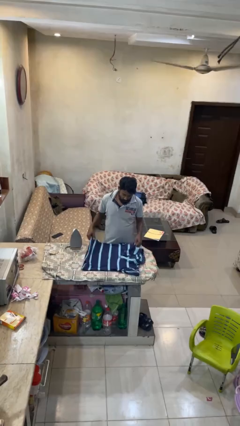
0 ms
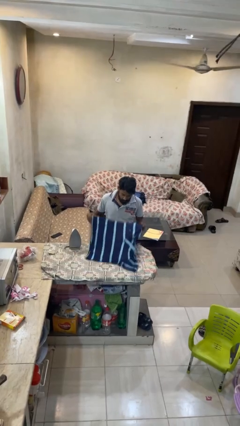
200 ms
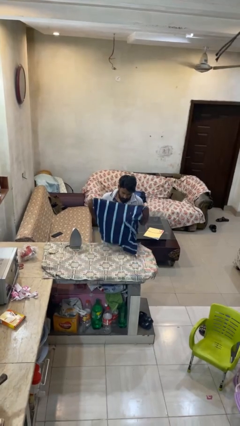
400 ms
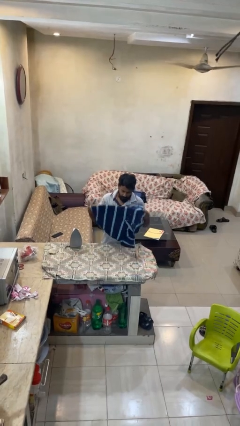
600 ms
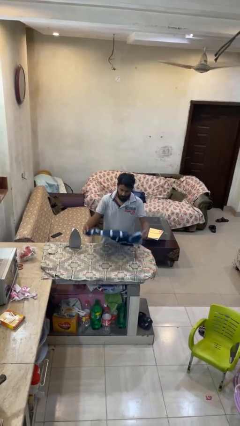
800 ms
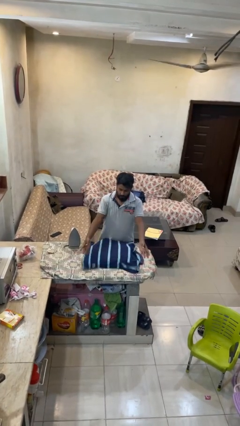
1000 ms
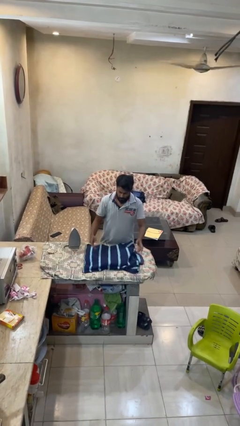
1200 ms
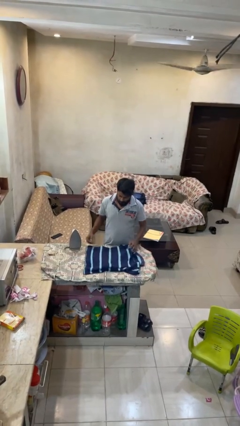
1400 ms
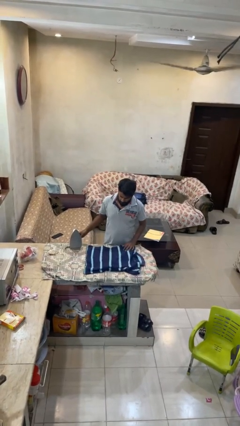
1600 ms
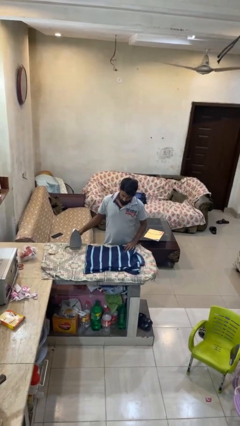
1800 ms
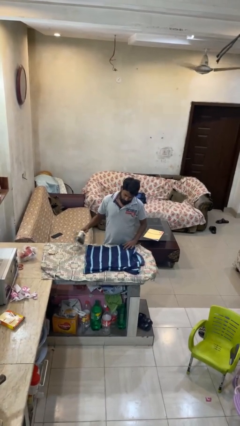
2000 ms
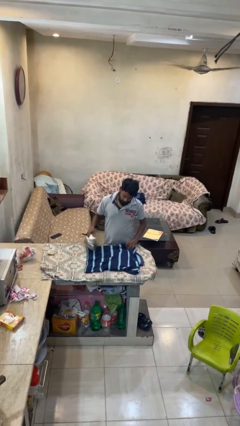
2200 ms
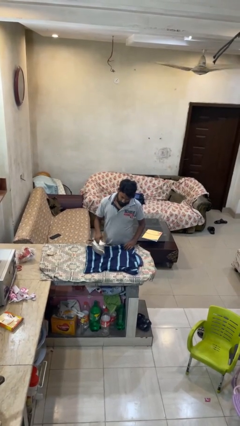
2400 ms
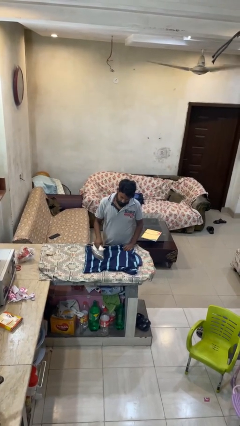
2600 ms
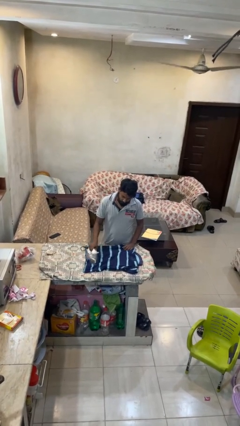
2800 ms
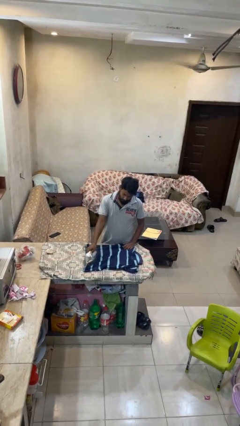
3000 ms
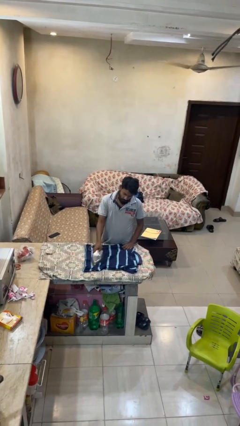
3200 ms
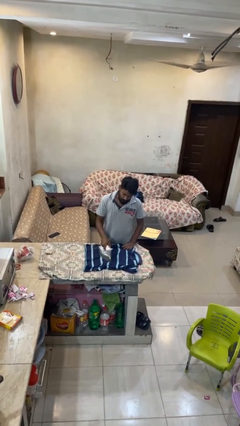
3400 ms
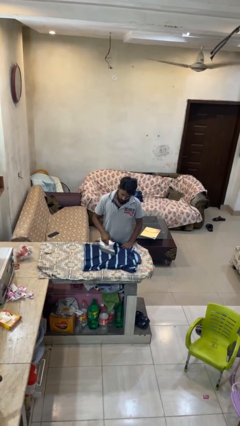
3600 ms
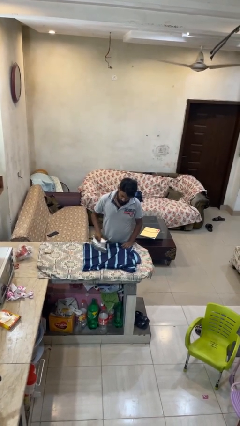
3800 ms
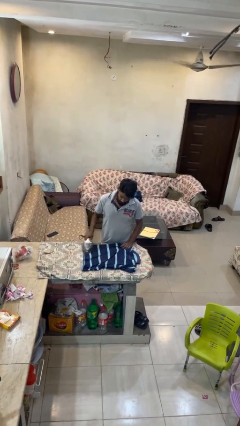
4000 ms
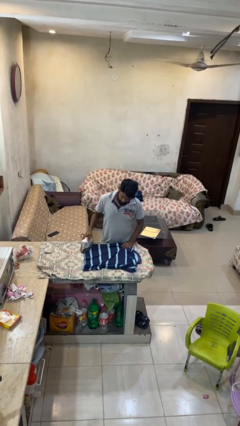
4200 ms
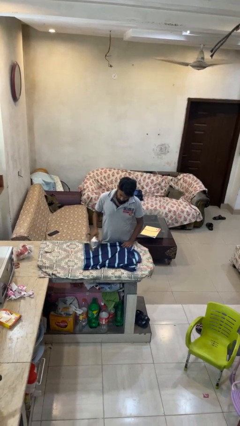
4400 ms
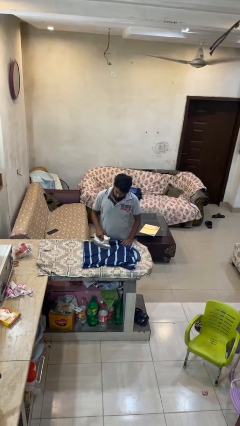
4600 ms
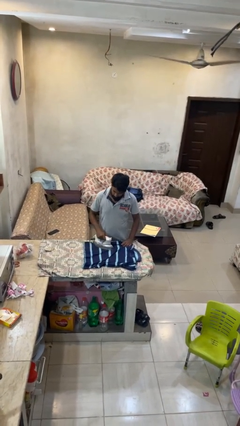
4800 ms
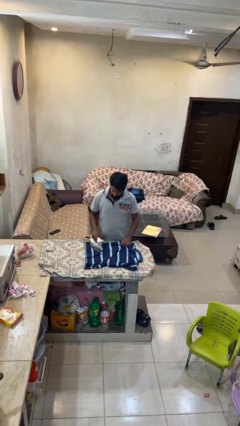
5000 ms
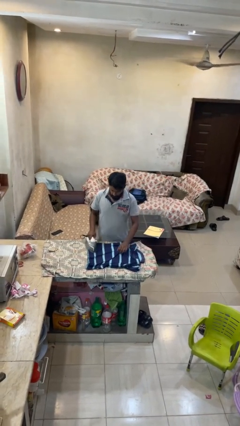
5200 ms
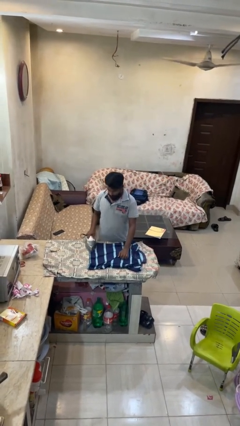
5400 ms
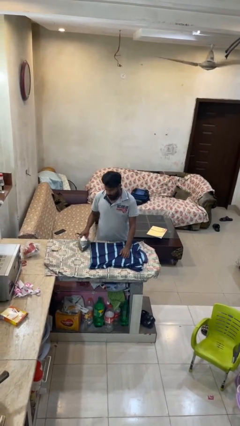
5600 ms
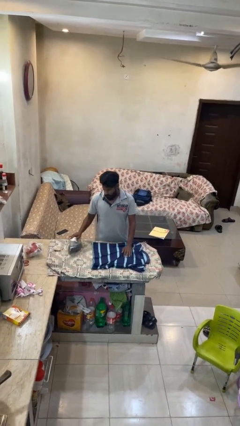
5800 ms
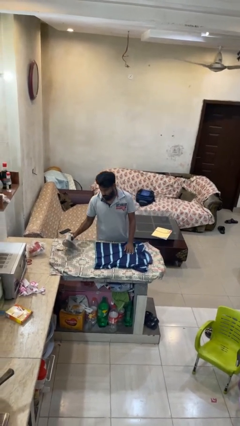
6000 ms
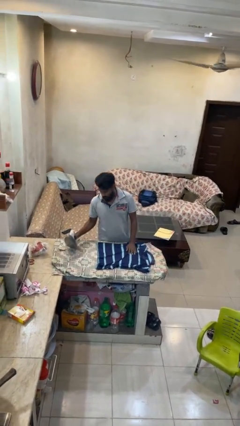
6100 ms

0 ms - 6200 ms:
person irons clothes

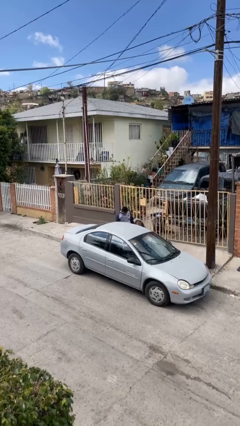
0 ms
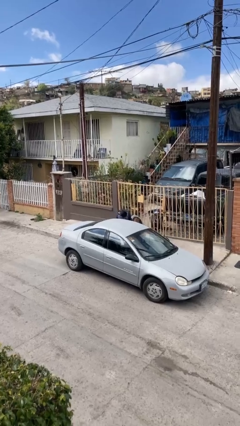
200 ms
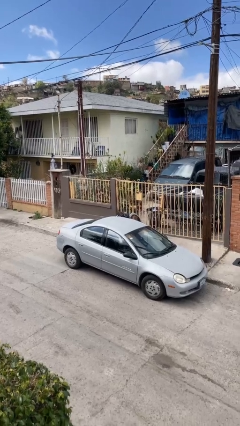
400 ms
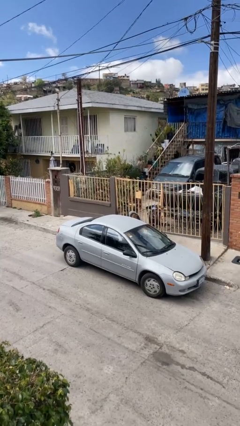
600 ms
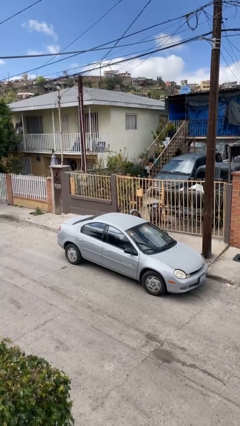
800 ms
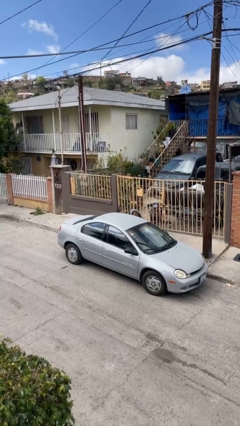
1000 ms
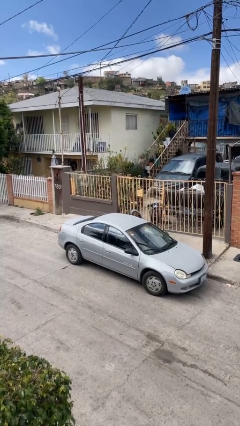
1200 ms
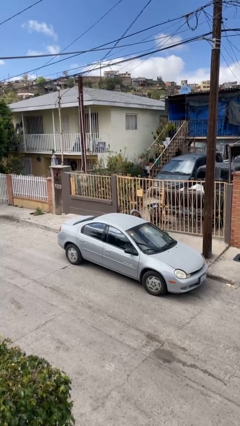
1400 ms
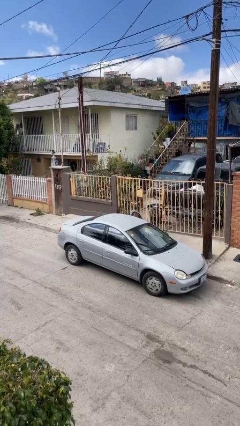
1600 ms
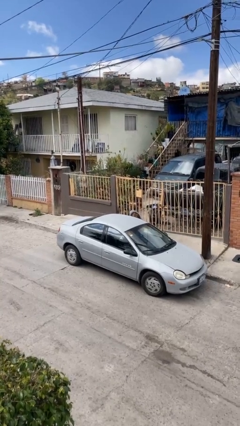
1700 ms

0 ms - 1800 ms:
person enters car

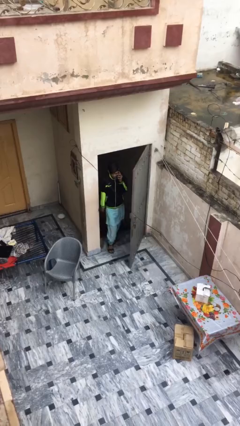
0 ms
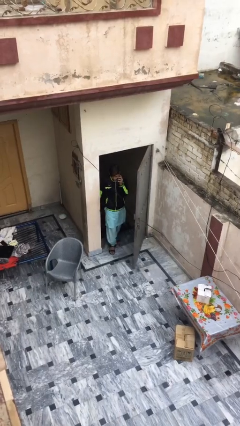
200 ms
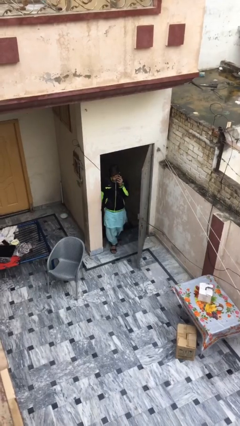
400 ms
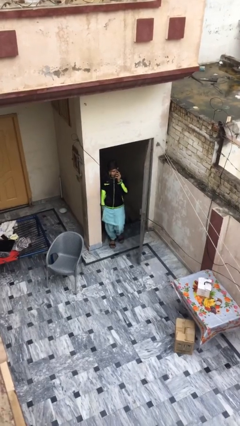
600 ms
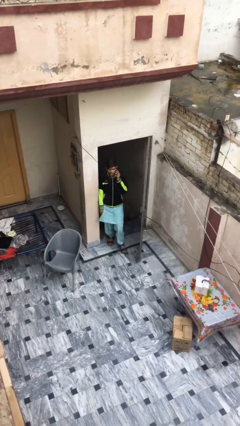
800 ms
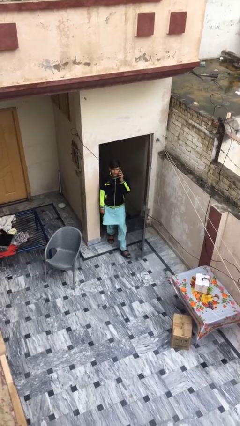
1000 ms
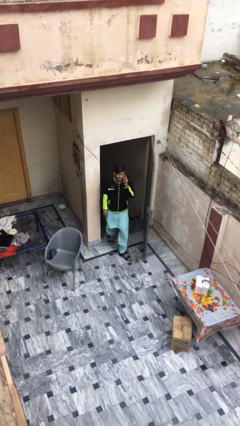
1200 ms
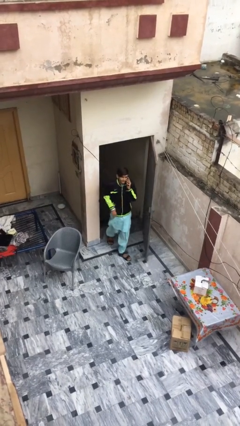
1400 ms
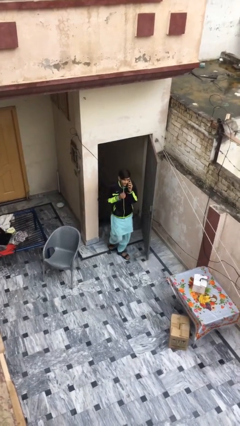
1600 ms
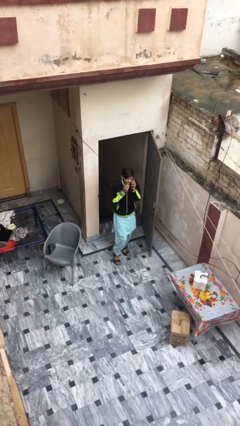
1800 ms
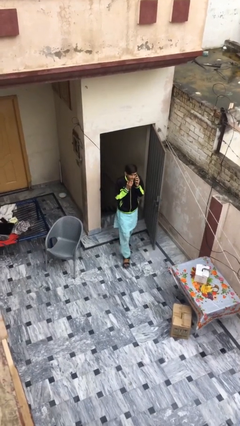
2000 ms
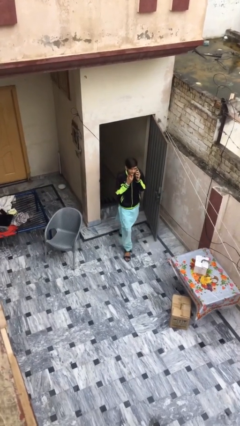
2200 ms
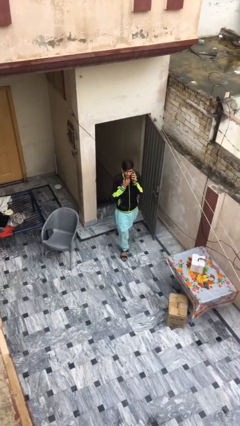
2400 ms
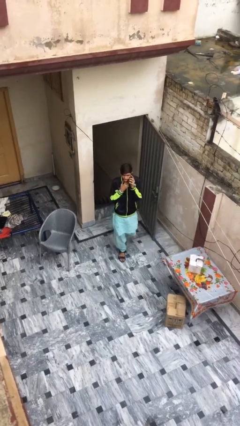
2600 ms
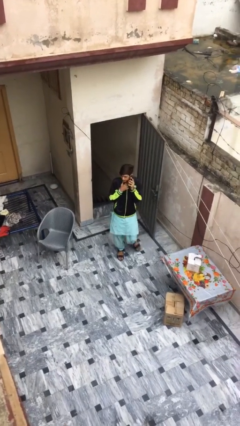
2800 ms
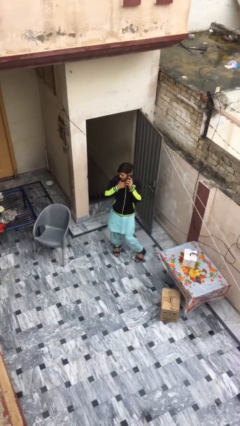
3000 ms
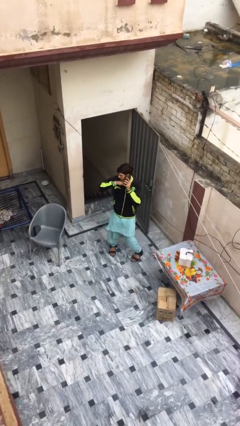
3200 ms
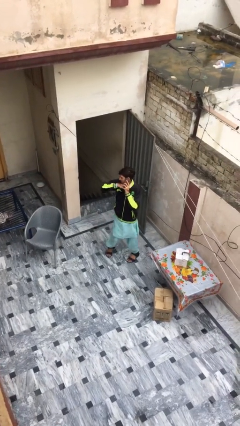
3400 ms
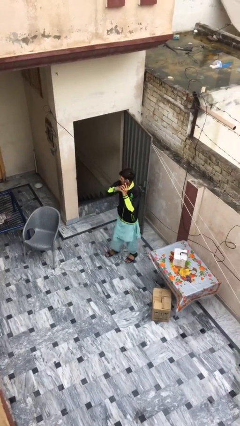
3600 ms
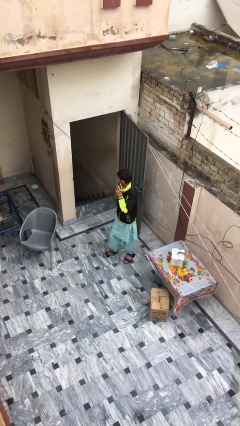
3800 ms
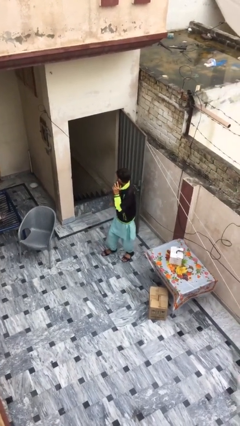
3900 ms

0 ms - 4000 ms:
person enters scene through structure

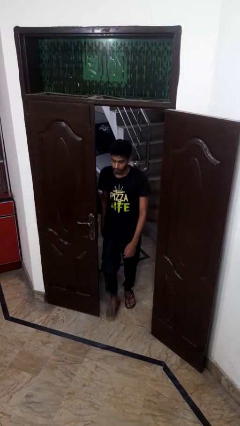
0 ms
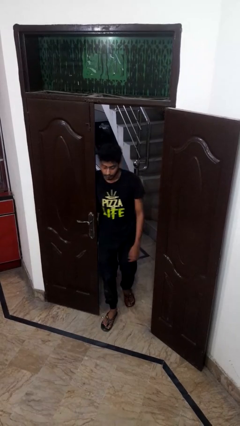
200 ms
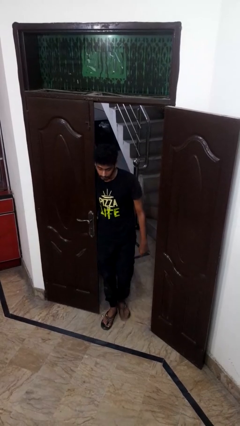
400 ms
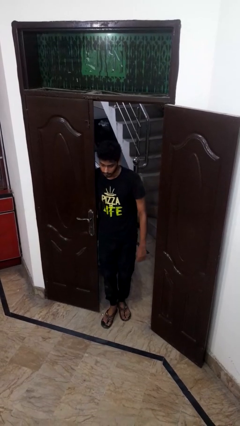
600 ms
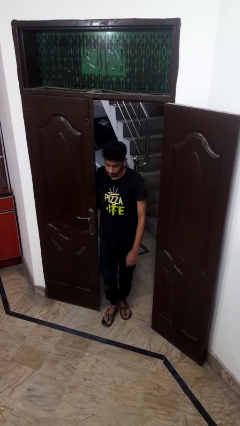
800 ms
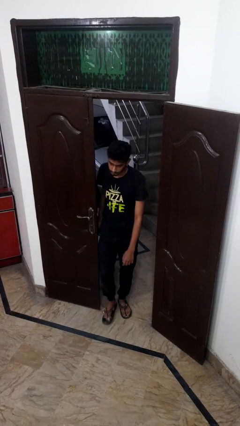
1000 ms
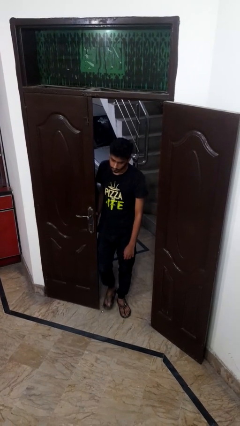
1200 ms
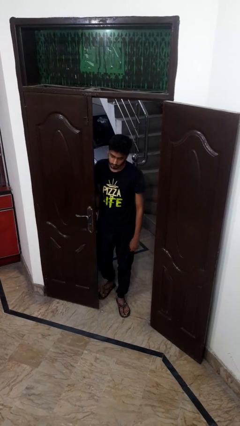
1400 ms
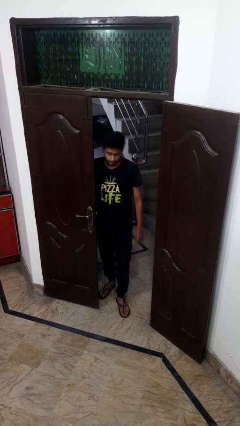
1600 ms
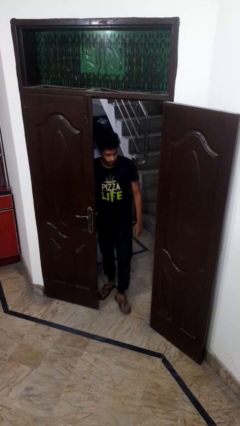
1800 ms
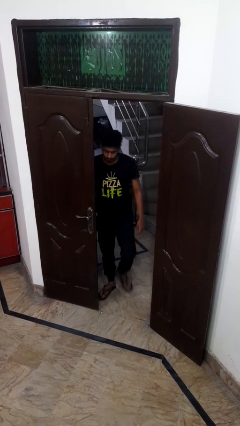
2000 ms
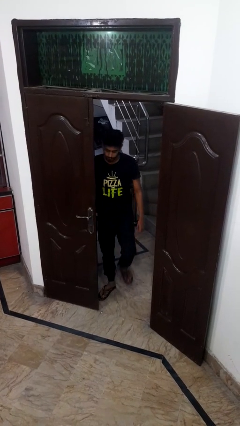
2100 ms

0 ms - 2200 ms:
person bumps into wall

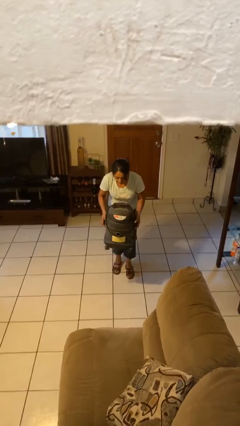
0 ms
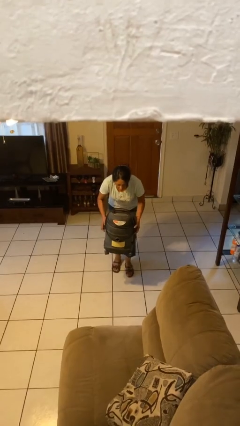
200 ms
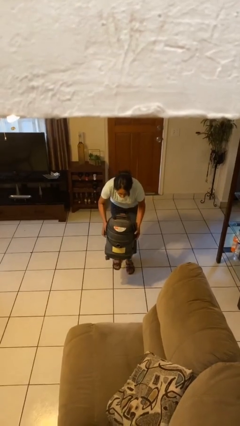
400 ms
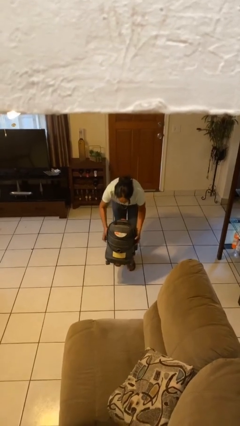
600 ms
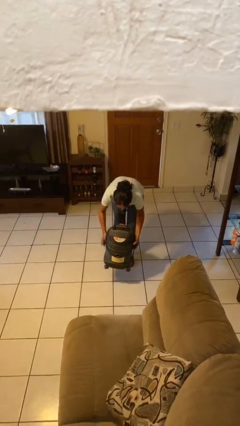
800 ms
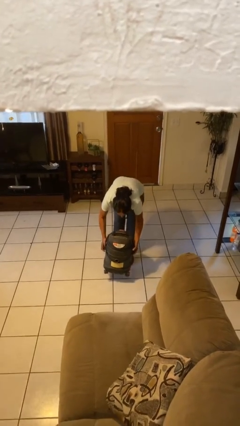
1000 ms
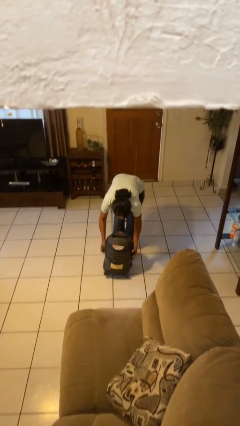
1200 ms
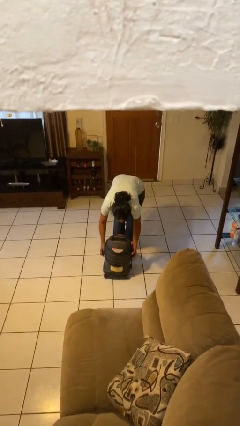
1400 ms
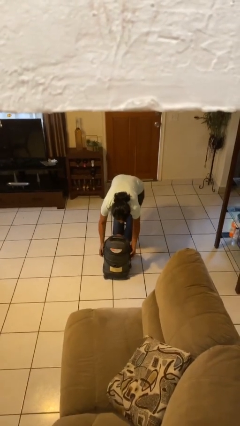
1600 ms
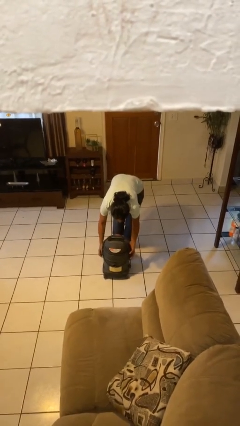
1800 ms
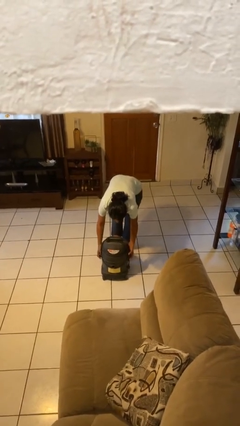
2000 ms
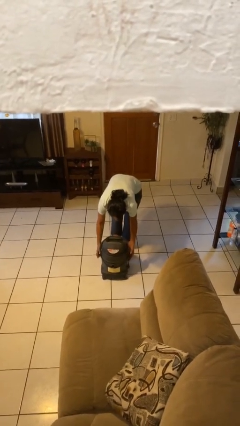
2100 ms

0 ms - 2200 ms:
person puts down object on floor

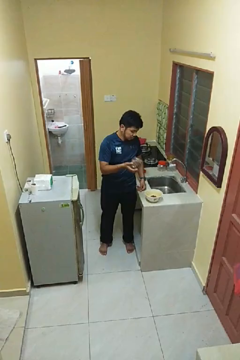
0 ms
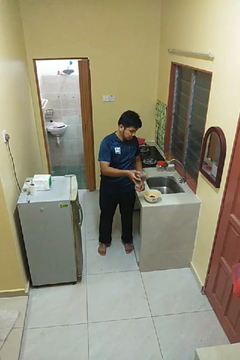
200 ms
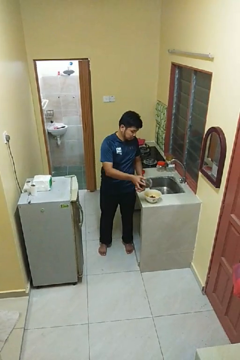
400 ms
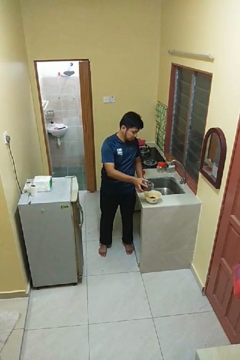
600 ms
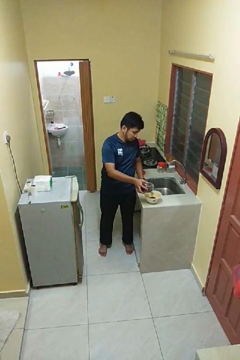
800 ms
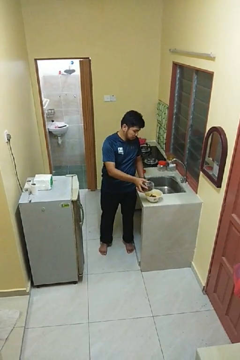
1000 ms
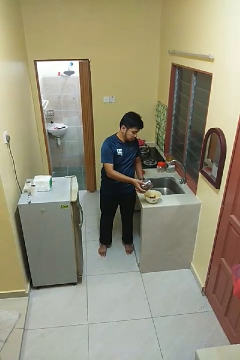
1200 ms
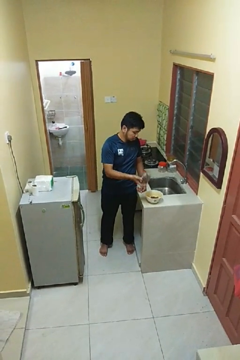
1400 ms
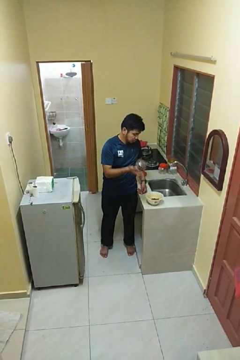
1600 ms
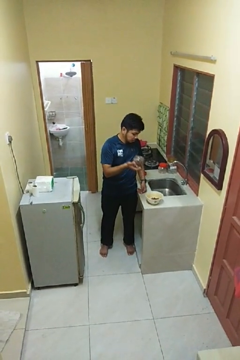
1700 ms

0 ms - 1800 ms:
person pours into bowl
